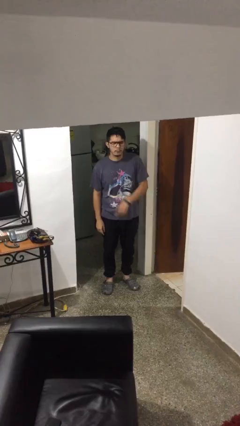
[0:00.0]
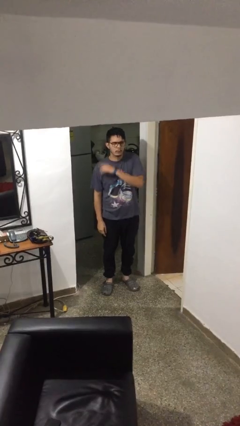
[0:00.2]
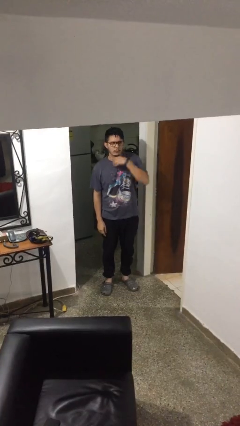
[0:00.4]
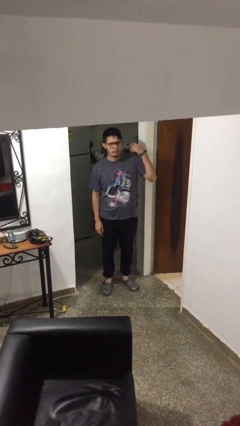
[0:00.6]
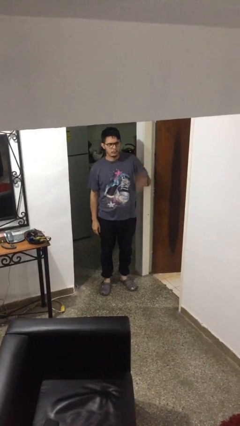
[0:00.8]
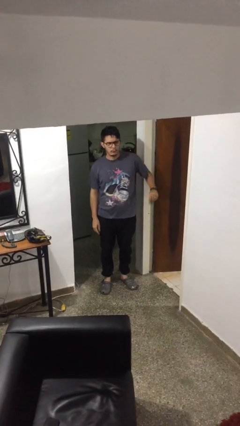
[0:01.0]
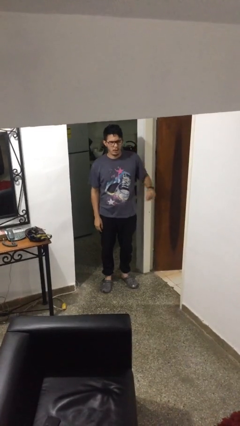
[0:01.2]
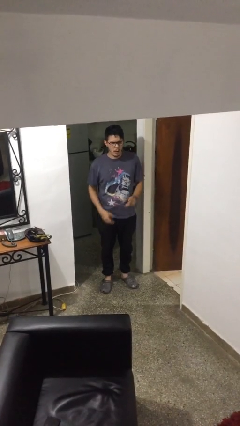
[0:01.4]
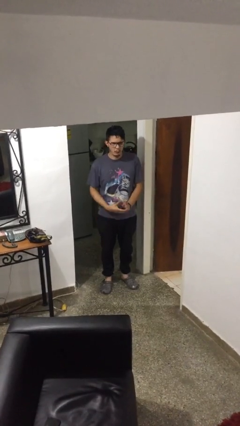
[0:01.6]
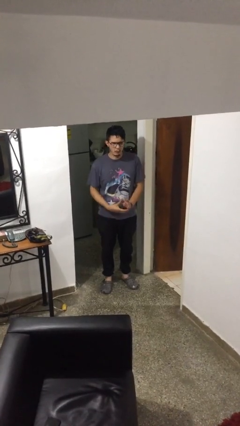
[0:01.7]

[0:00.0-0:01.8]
person gestures cut

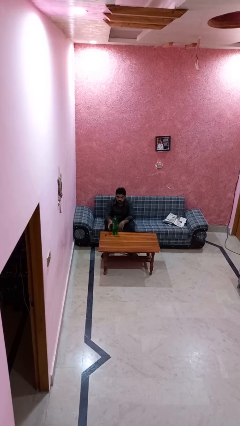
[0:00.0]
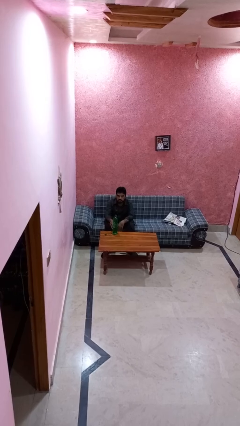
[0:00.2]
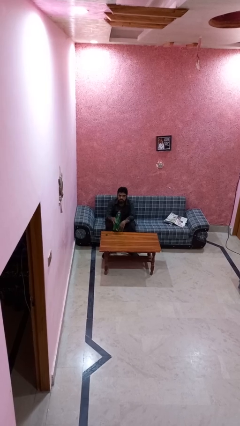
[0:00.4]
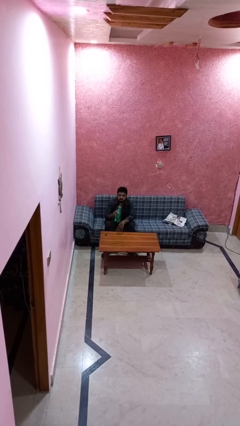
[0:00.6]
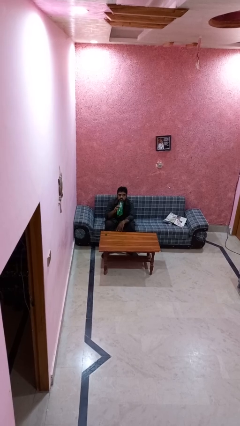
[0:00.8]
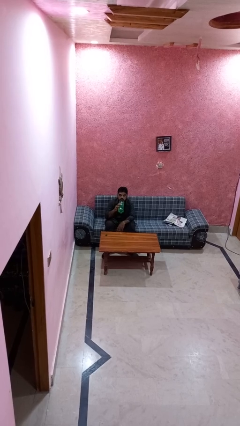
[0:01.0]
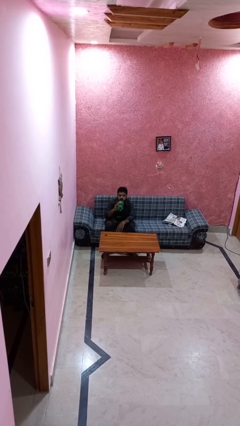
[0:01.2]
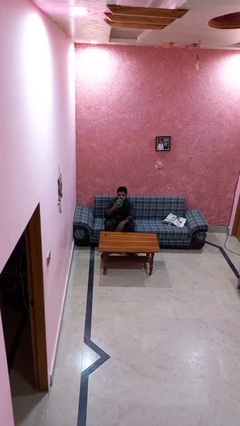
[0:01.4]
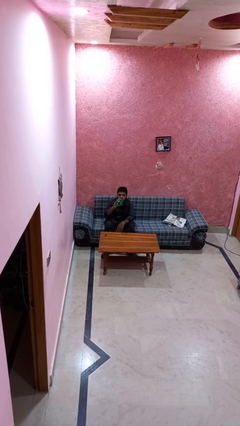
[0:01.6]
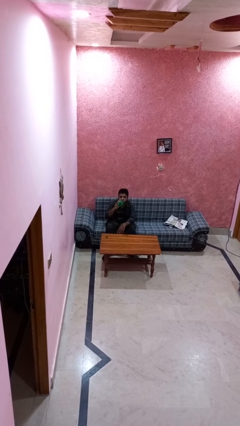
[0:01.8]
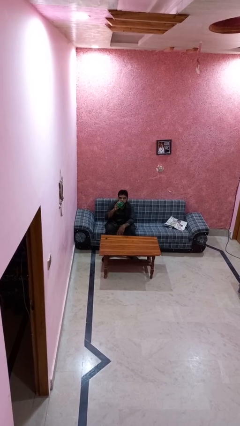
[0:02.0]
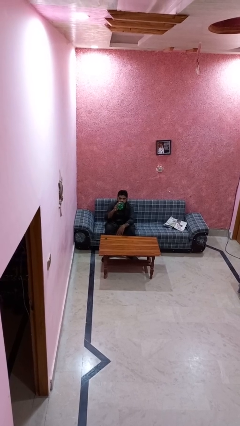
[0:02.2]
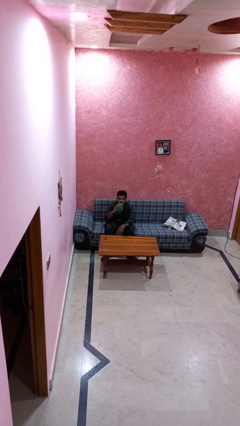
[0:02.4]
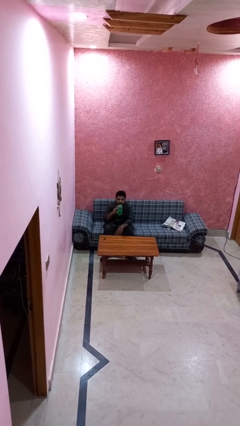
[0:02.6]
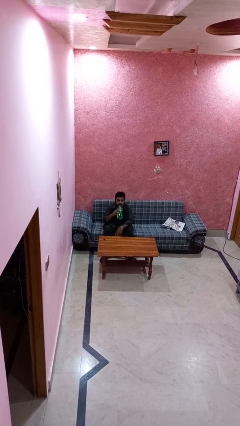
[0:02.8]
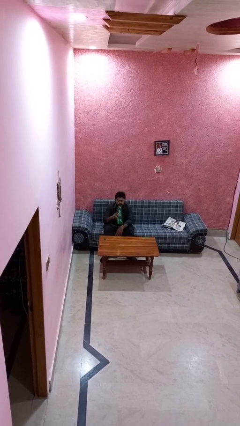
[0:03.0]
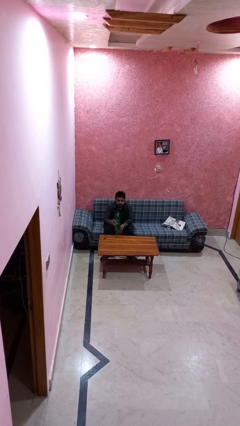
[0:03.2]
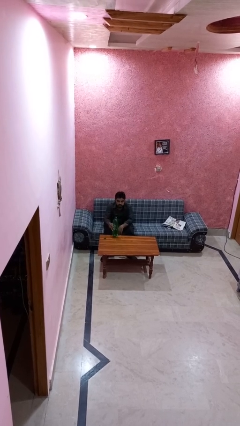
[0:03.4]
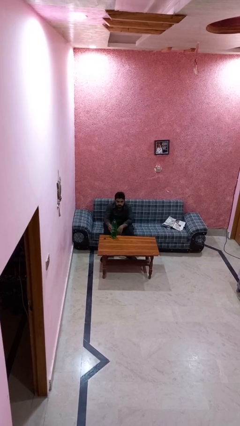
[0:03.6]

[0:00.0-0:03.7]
person drinks from bottle

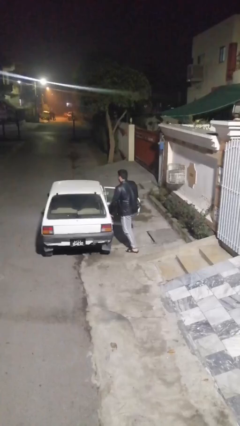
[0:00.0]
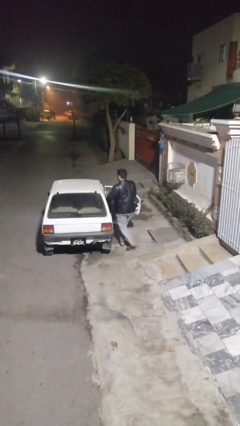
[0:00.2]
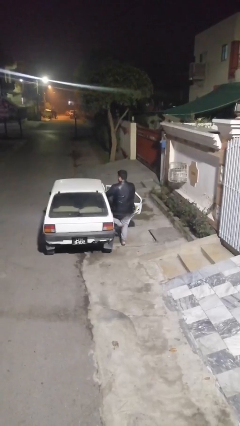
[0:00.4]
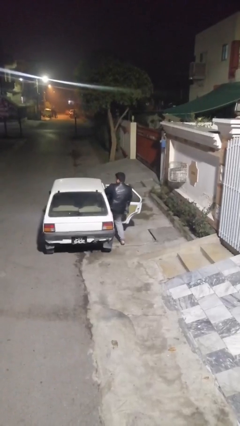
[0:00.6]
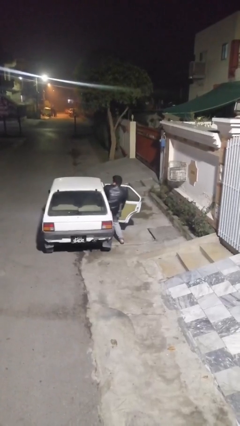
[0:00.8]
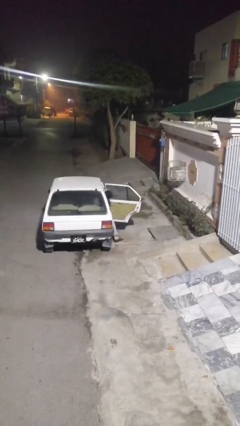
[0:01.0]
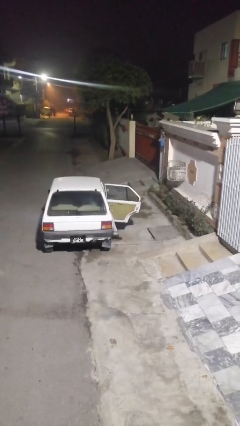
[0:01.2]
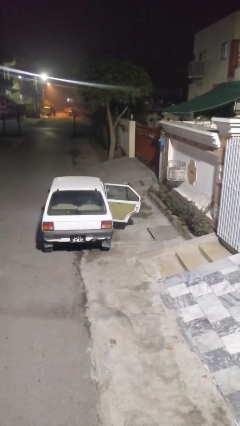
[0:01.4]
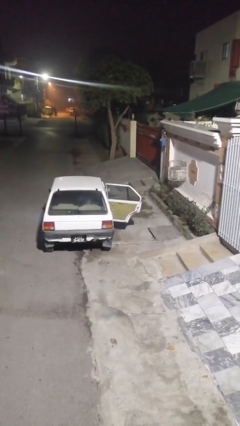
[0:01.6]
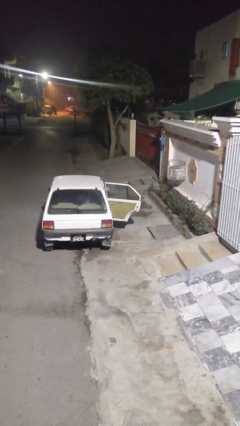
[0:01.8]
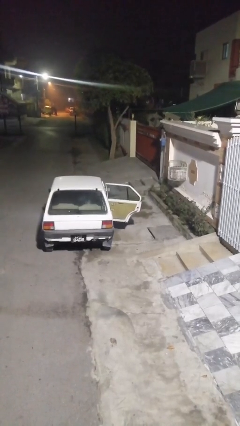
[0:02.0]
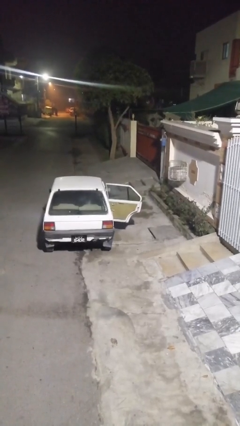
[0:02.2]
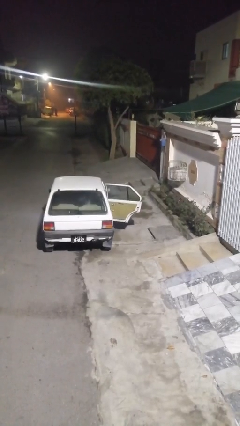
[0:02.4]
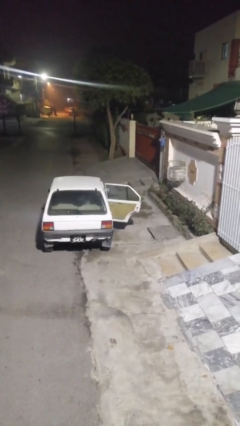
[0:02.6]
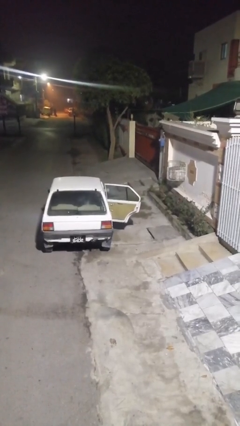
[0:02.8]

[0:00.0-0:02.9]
person enters car

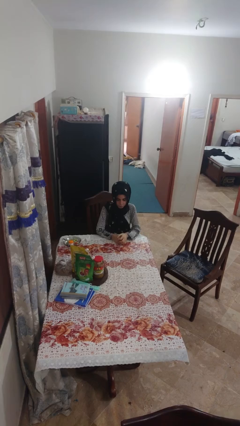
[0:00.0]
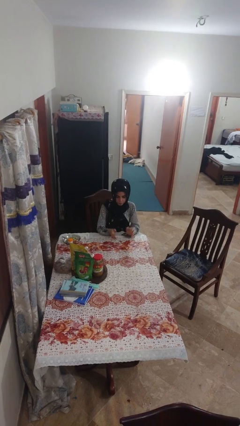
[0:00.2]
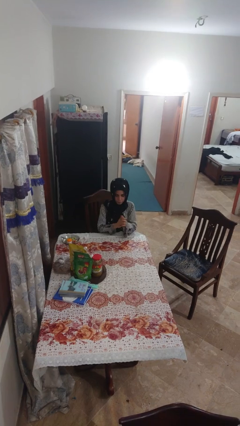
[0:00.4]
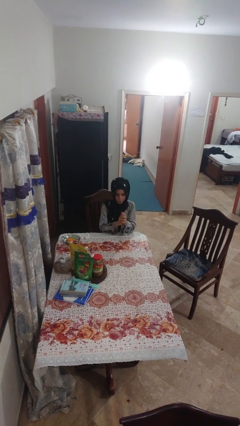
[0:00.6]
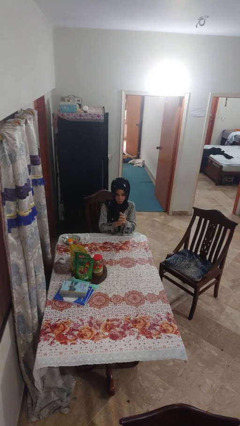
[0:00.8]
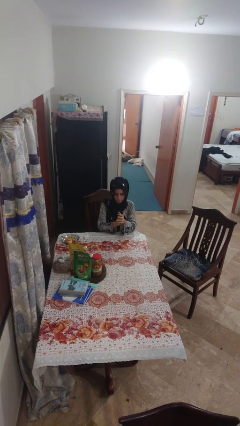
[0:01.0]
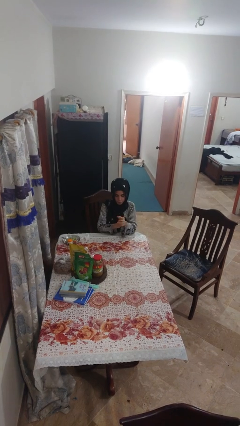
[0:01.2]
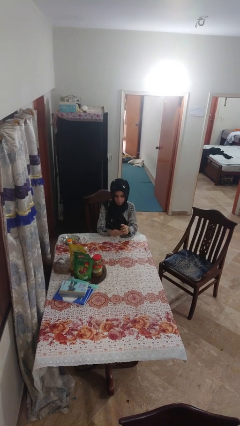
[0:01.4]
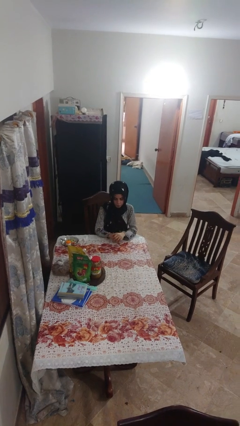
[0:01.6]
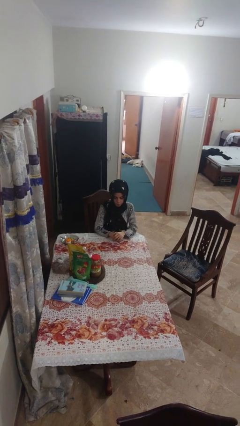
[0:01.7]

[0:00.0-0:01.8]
person claps hands

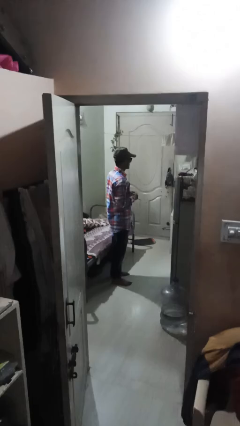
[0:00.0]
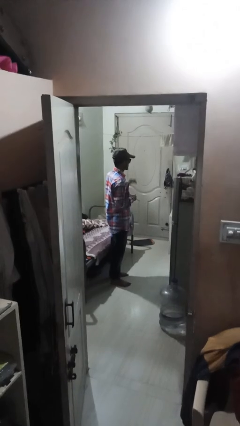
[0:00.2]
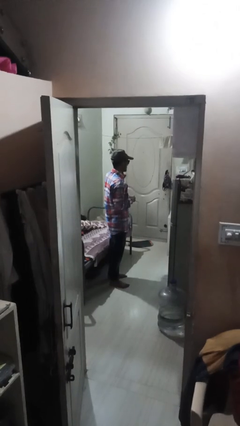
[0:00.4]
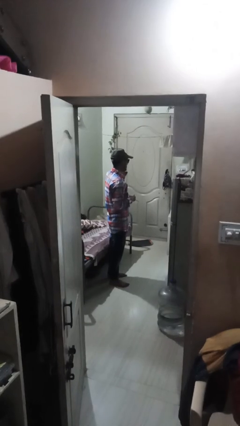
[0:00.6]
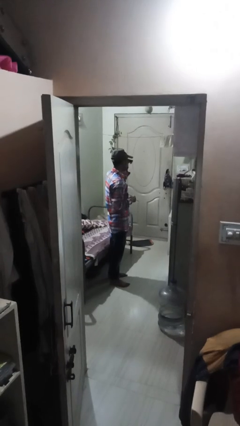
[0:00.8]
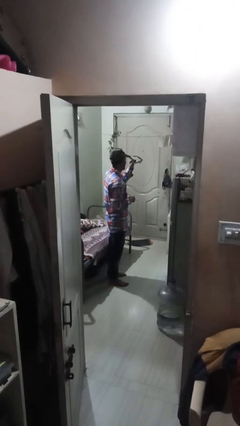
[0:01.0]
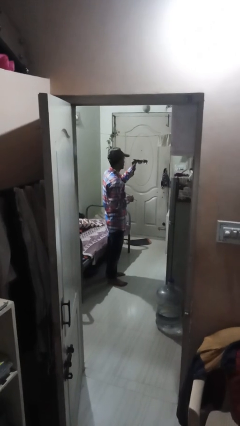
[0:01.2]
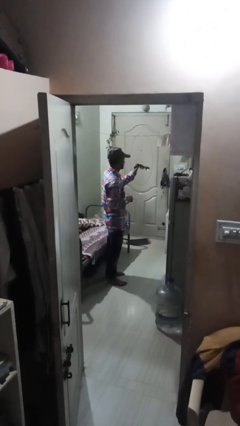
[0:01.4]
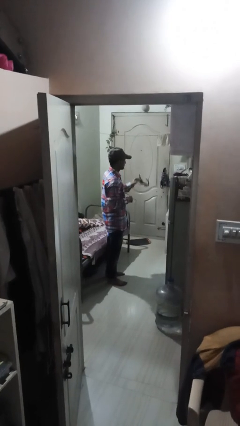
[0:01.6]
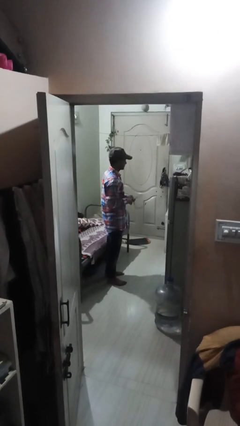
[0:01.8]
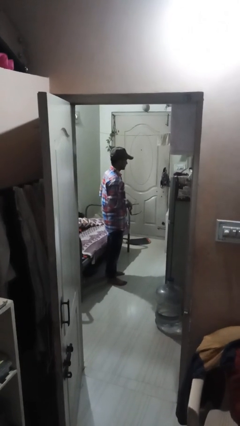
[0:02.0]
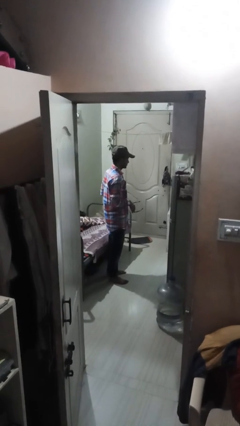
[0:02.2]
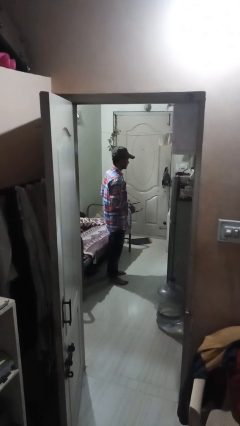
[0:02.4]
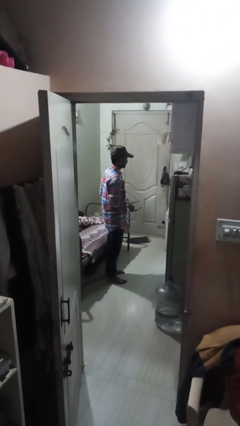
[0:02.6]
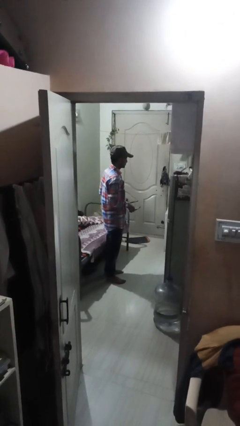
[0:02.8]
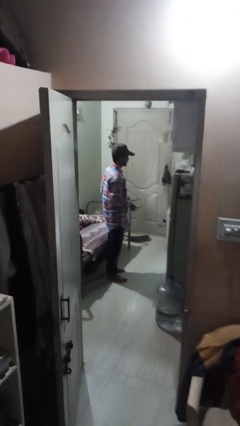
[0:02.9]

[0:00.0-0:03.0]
person takes off sunglasses

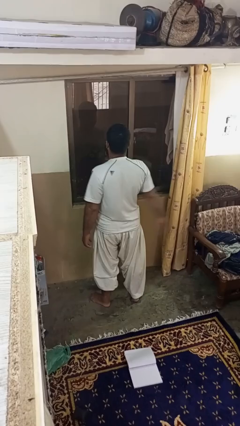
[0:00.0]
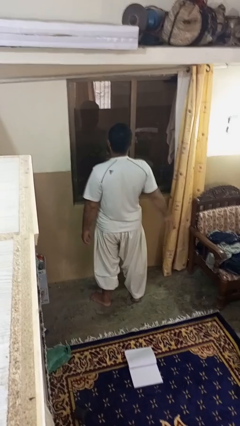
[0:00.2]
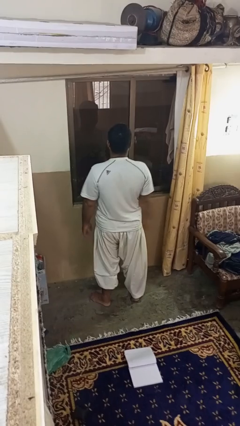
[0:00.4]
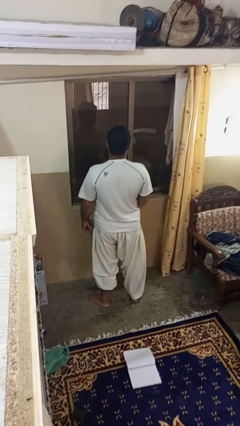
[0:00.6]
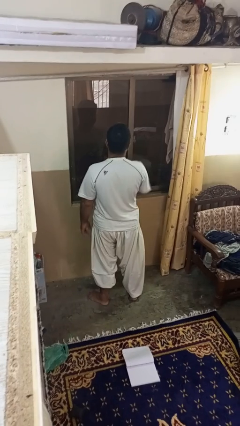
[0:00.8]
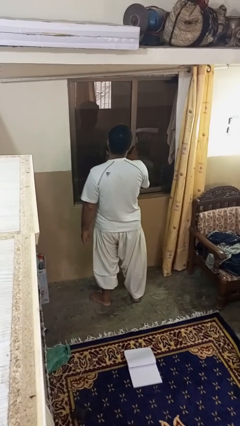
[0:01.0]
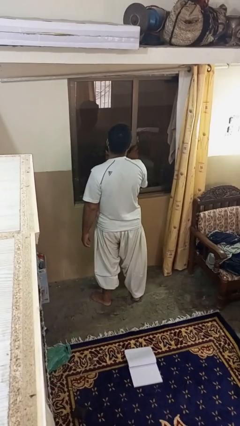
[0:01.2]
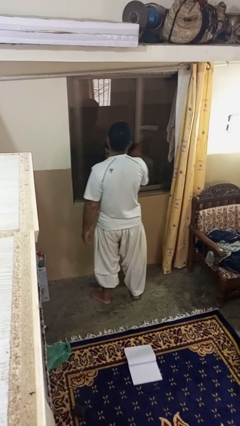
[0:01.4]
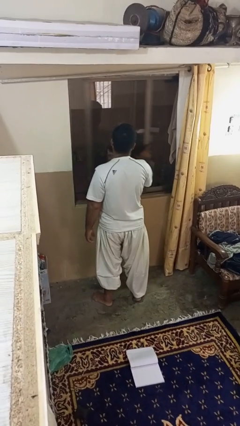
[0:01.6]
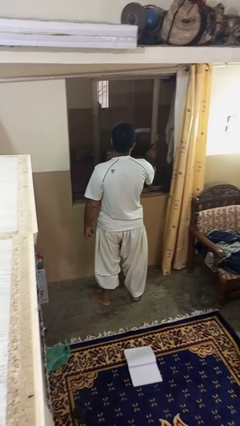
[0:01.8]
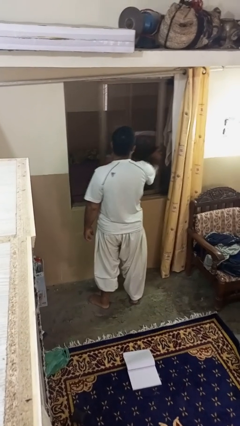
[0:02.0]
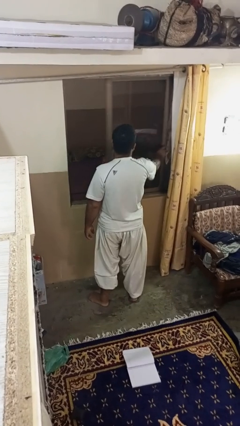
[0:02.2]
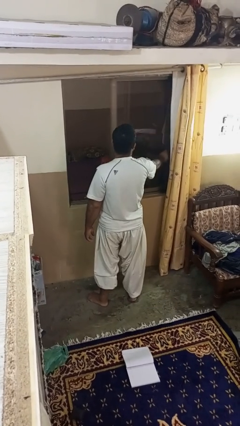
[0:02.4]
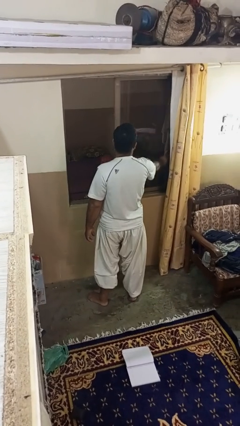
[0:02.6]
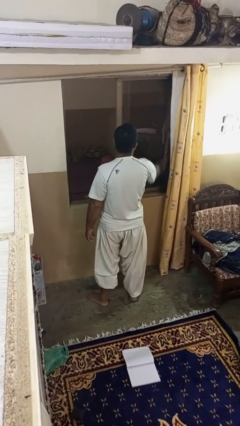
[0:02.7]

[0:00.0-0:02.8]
person opens home window

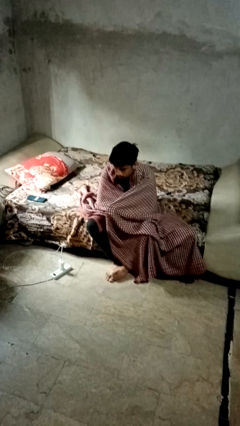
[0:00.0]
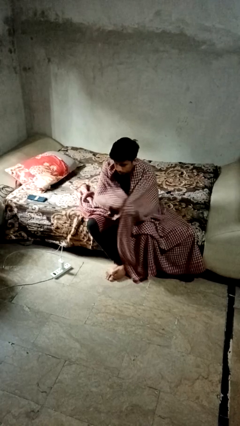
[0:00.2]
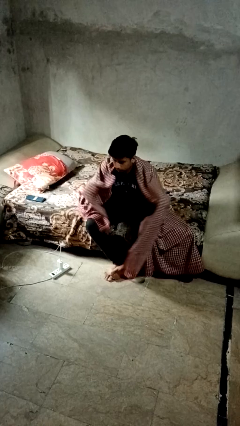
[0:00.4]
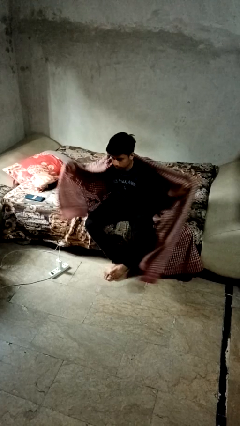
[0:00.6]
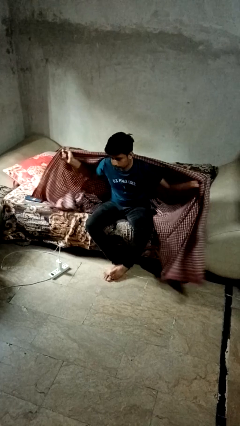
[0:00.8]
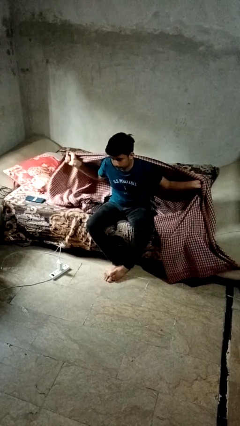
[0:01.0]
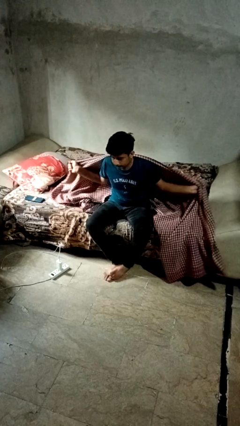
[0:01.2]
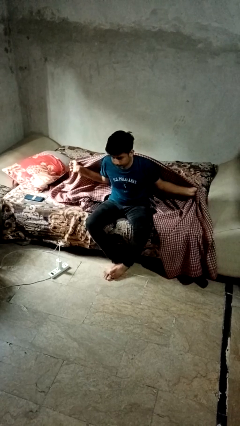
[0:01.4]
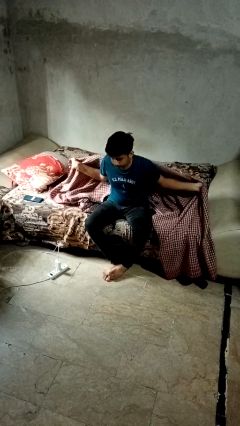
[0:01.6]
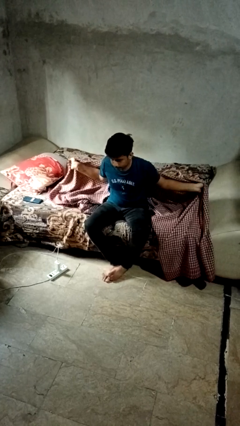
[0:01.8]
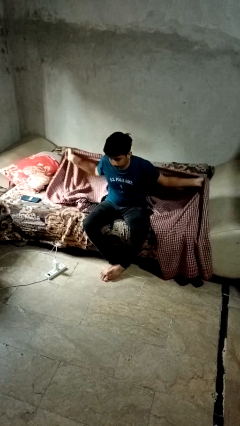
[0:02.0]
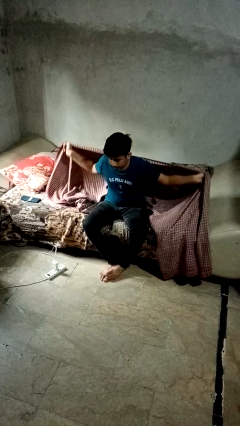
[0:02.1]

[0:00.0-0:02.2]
person uncovers with blanket
